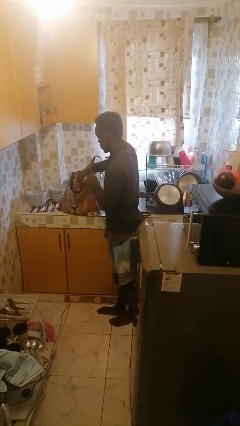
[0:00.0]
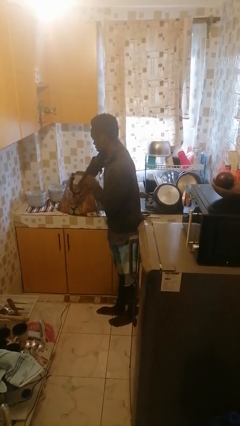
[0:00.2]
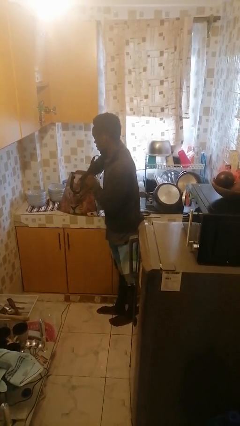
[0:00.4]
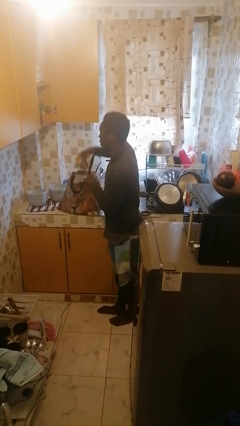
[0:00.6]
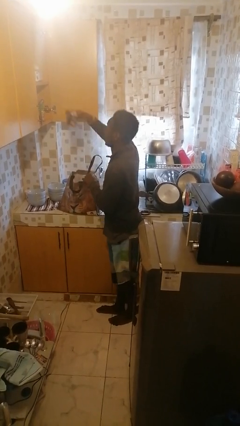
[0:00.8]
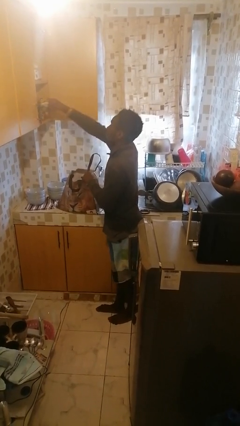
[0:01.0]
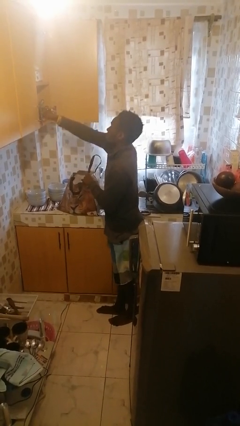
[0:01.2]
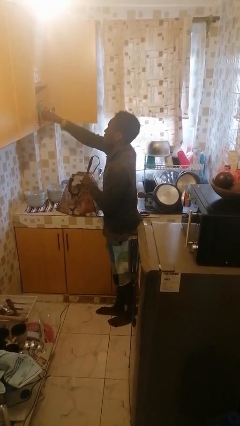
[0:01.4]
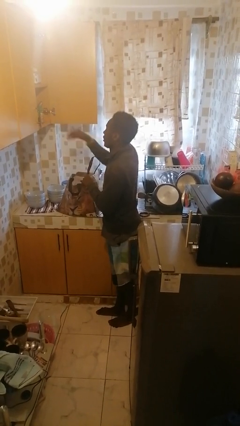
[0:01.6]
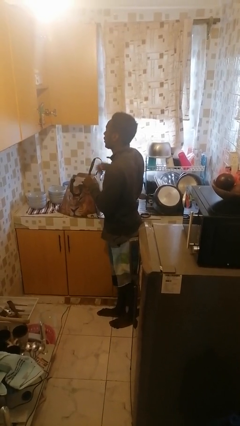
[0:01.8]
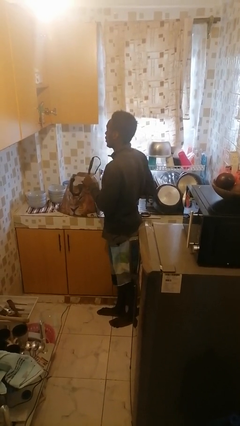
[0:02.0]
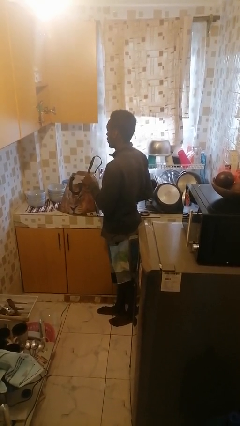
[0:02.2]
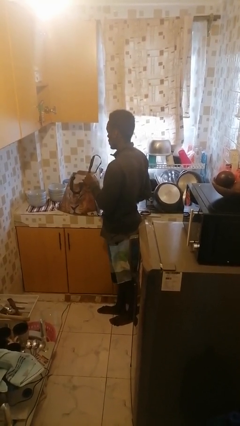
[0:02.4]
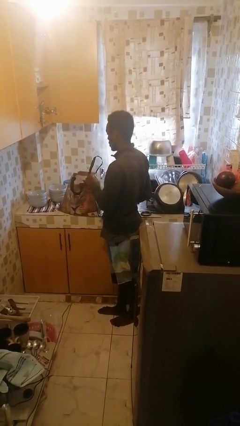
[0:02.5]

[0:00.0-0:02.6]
person loads groceries into cabinet

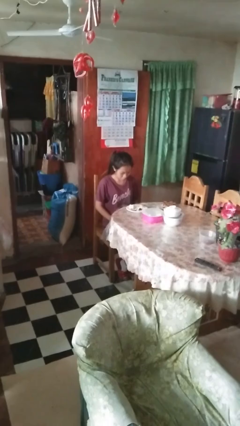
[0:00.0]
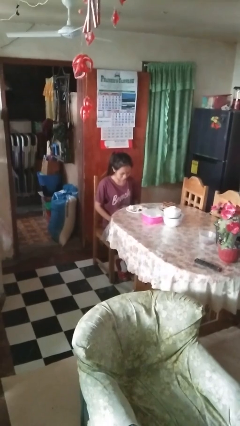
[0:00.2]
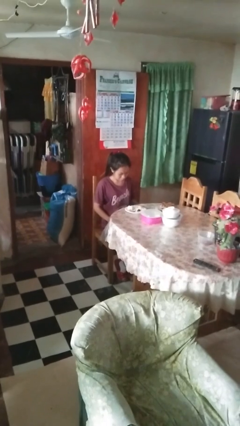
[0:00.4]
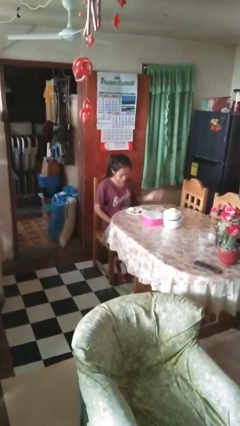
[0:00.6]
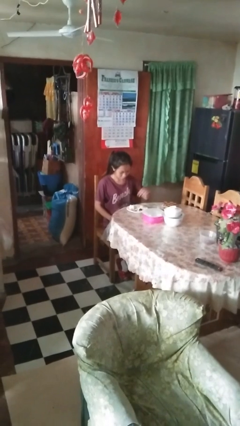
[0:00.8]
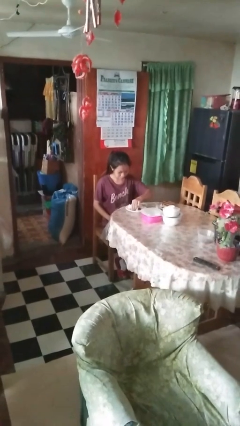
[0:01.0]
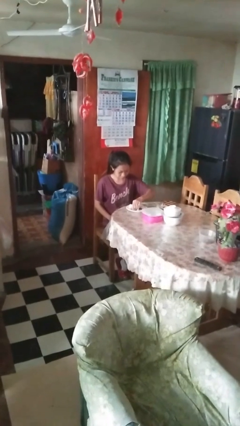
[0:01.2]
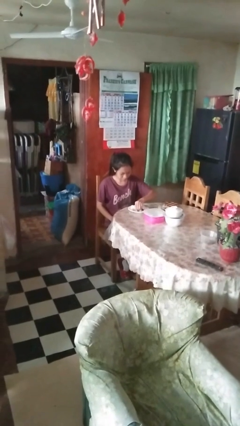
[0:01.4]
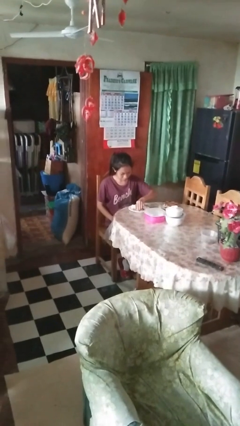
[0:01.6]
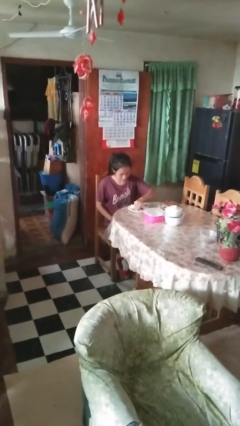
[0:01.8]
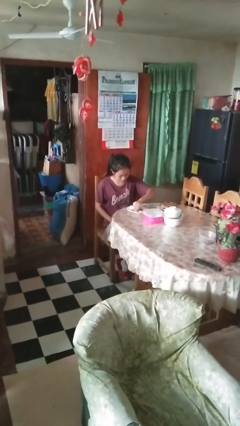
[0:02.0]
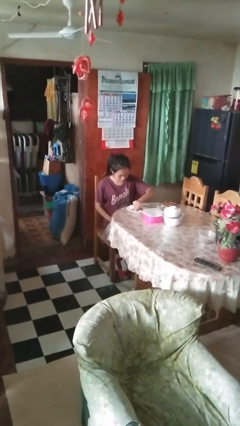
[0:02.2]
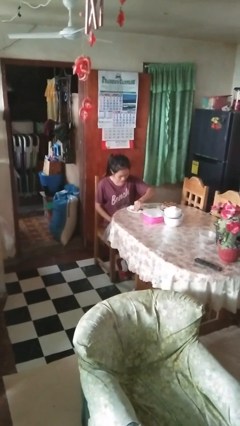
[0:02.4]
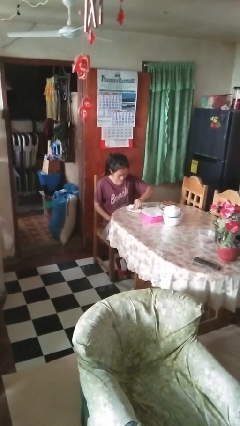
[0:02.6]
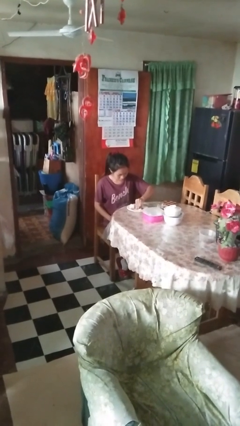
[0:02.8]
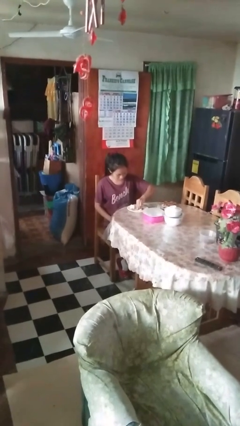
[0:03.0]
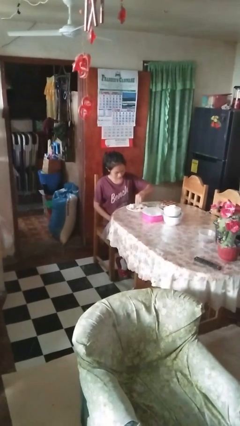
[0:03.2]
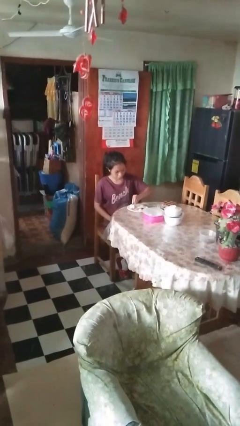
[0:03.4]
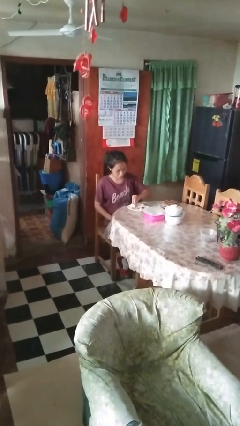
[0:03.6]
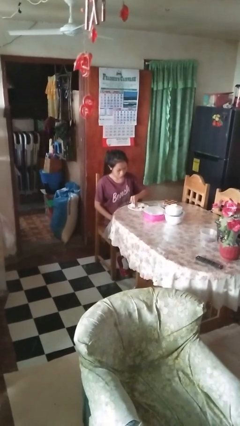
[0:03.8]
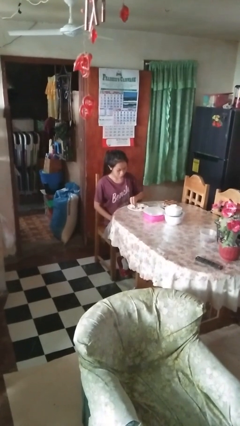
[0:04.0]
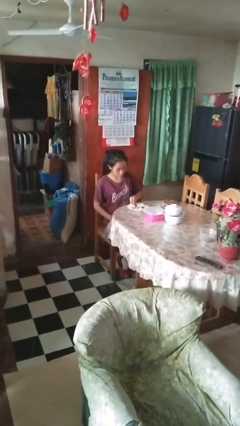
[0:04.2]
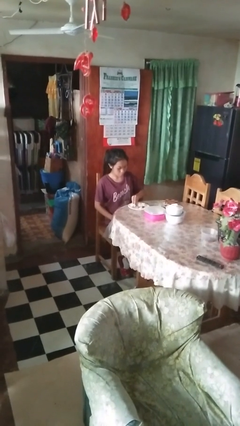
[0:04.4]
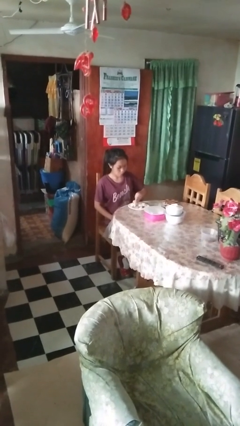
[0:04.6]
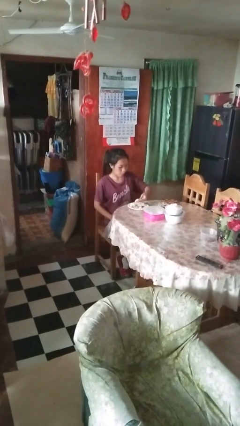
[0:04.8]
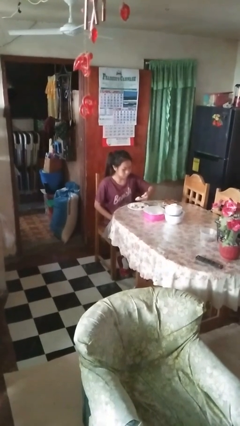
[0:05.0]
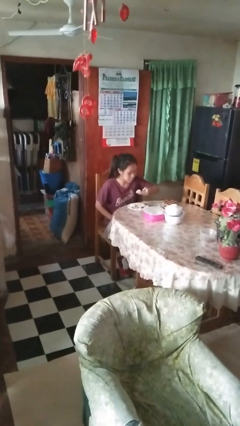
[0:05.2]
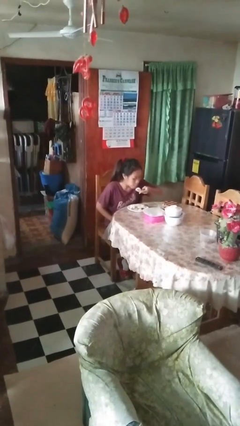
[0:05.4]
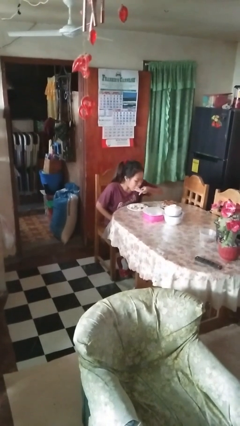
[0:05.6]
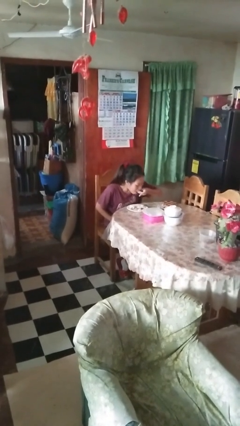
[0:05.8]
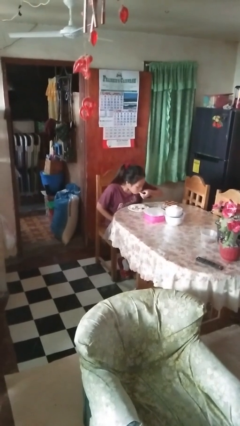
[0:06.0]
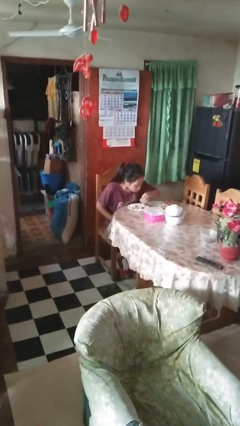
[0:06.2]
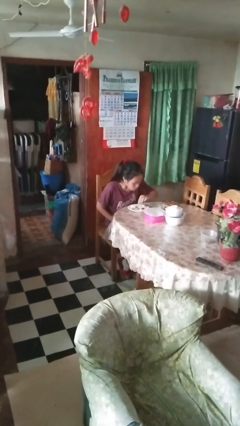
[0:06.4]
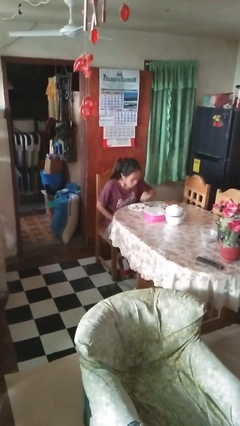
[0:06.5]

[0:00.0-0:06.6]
person eats with hands

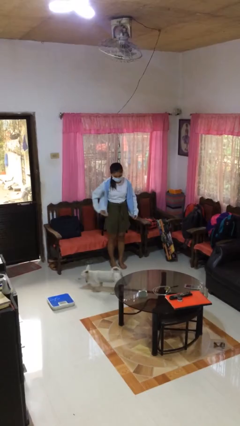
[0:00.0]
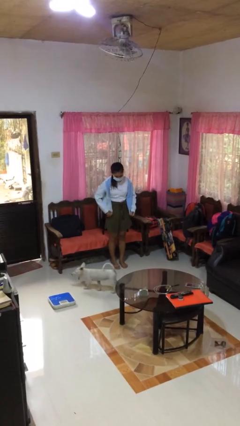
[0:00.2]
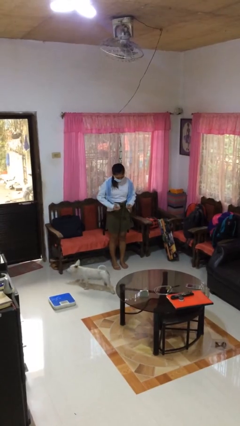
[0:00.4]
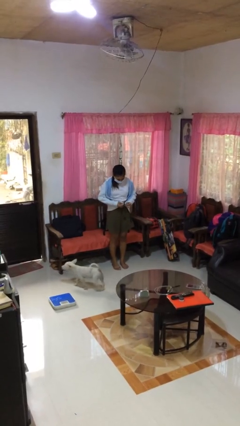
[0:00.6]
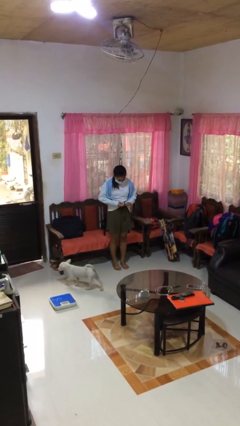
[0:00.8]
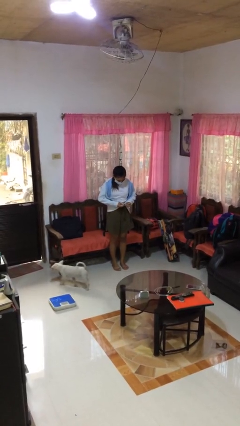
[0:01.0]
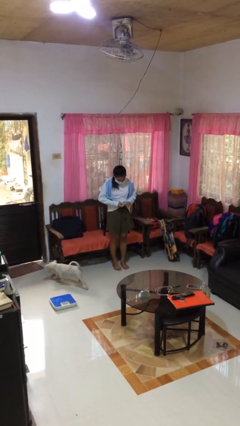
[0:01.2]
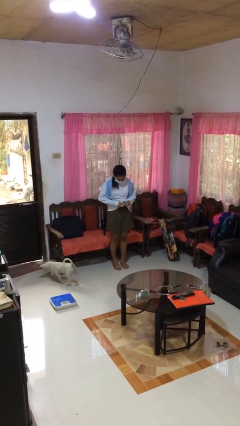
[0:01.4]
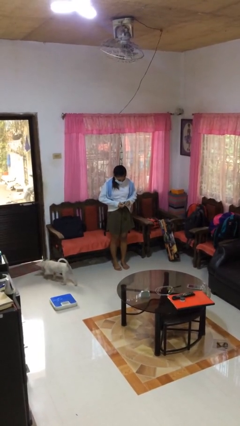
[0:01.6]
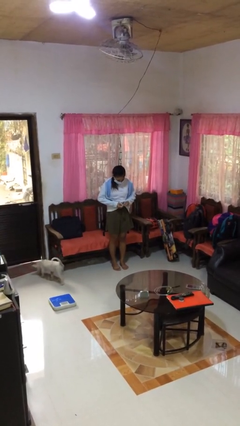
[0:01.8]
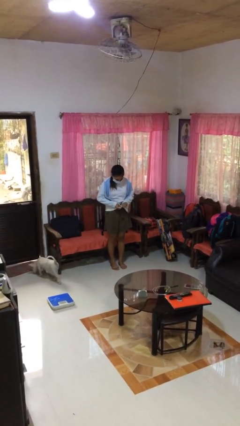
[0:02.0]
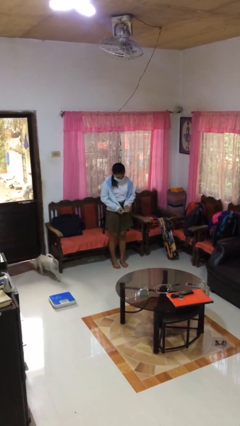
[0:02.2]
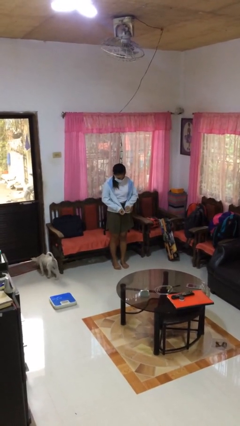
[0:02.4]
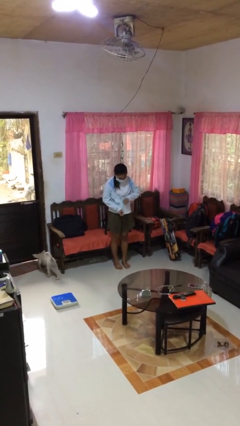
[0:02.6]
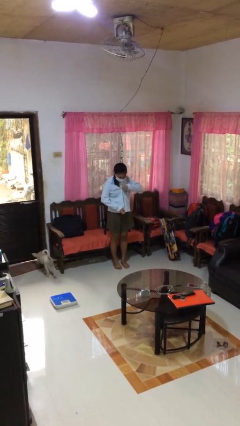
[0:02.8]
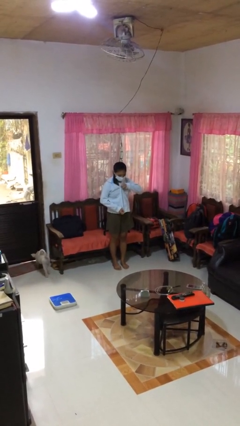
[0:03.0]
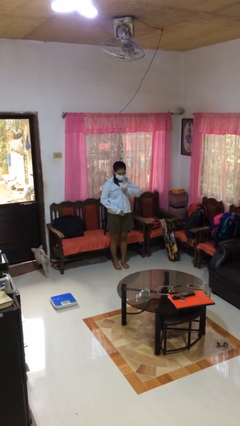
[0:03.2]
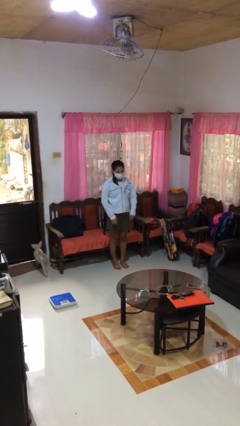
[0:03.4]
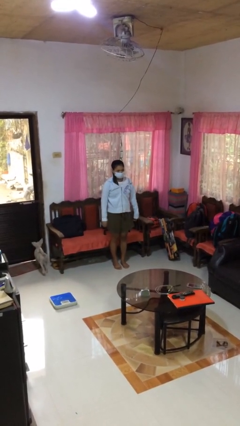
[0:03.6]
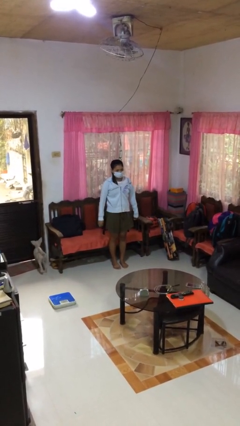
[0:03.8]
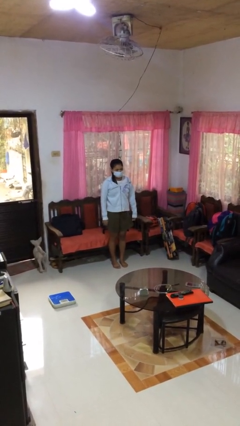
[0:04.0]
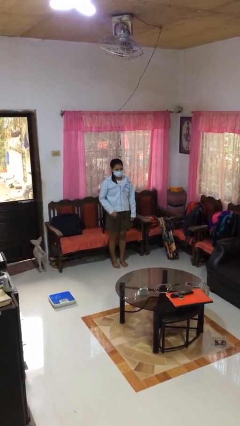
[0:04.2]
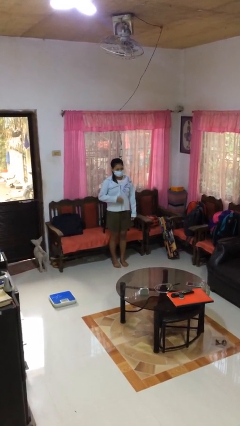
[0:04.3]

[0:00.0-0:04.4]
person zips up jacket

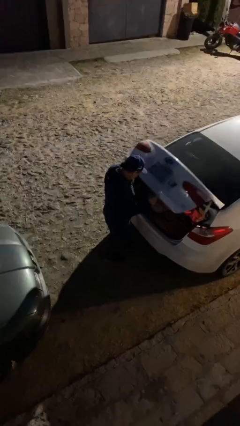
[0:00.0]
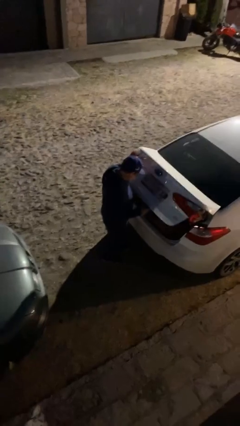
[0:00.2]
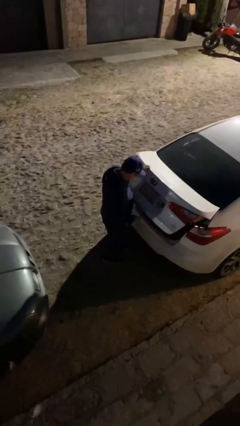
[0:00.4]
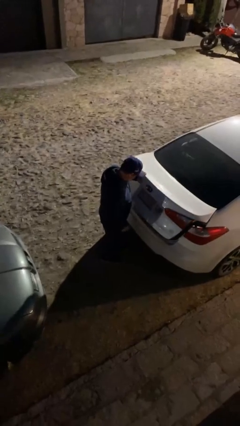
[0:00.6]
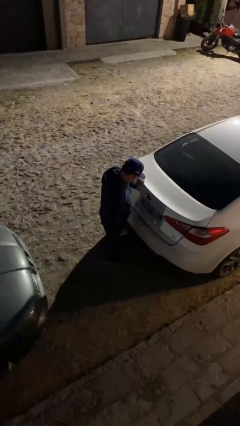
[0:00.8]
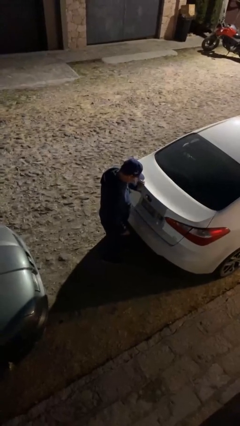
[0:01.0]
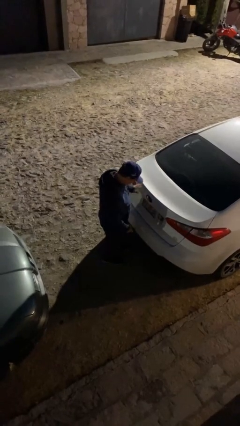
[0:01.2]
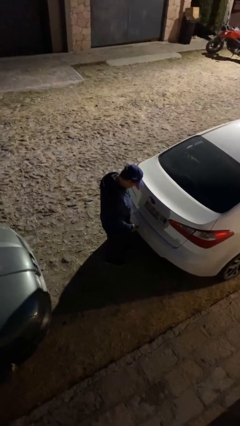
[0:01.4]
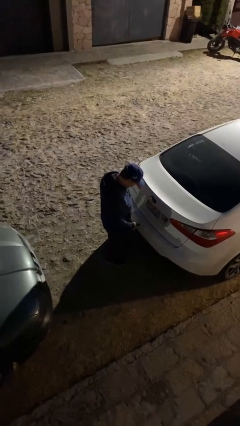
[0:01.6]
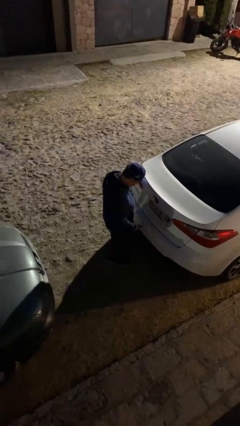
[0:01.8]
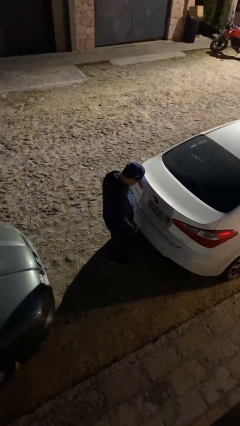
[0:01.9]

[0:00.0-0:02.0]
person closes car trunk

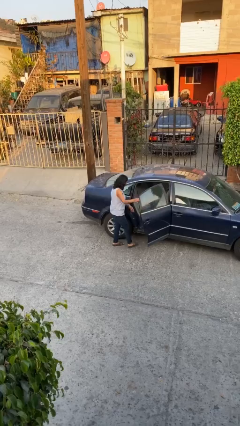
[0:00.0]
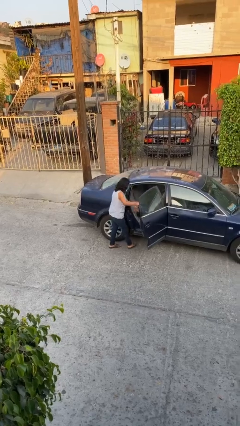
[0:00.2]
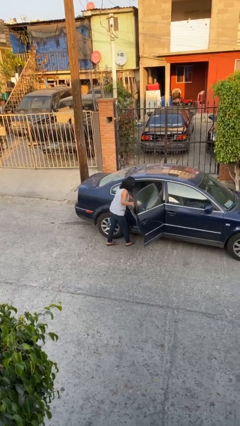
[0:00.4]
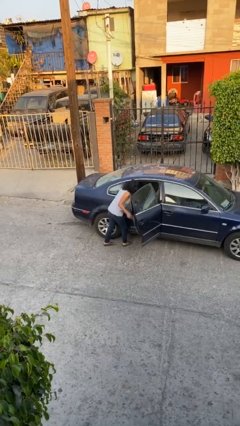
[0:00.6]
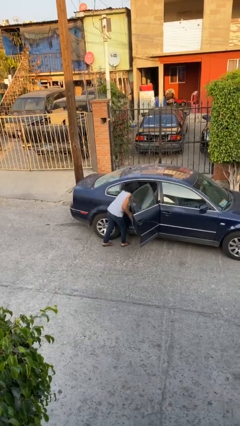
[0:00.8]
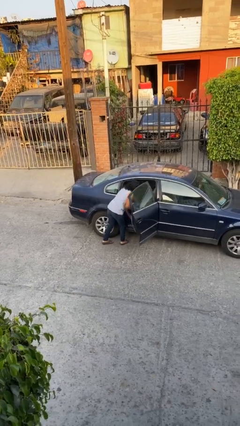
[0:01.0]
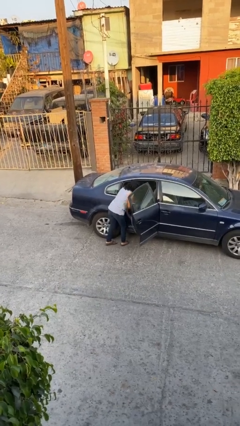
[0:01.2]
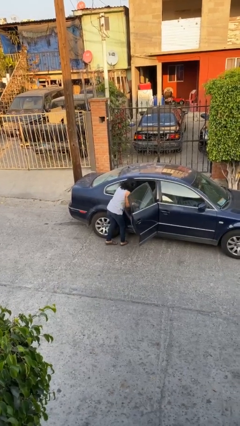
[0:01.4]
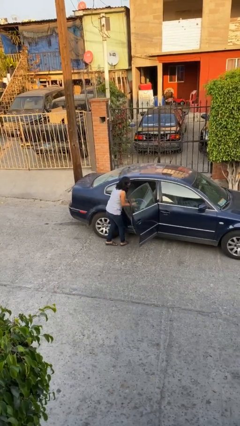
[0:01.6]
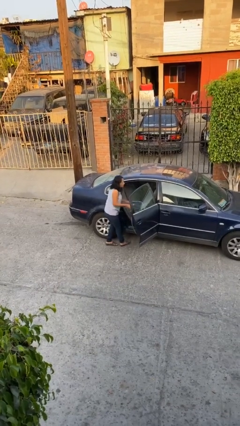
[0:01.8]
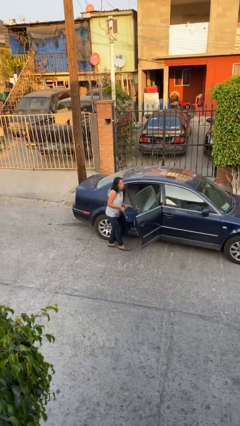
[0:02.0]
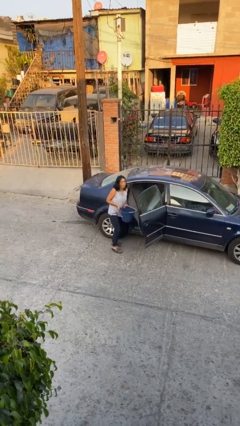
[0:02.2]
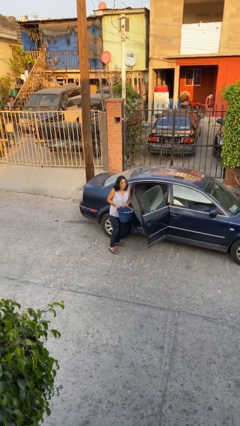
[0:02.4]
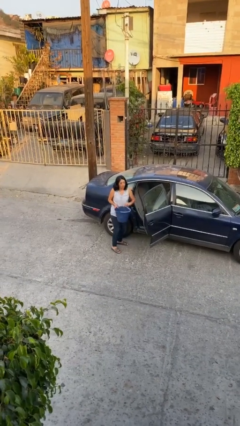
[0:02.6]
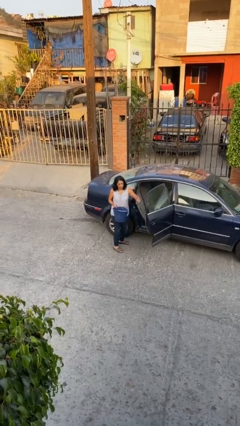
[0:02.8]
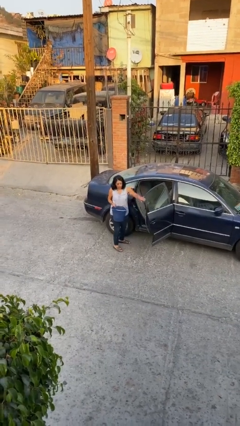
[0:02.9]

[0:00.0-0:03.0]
person unloads car
